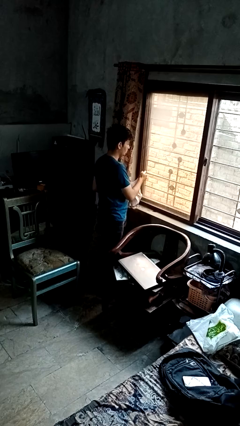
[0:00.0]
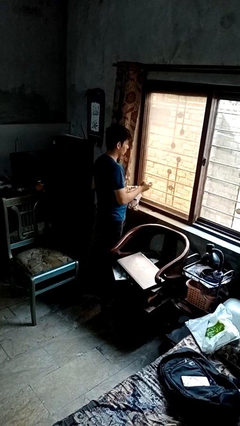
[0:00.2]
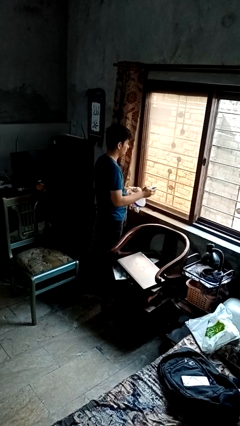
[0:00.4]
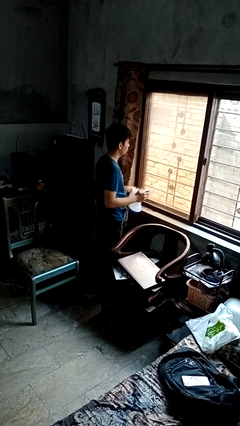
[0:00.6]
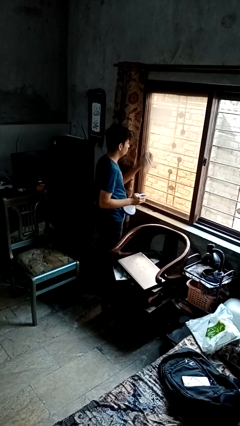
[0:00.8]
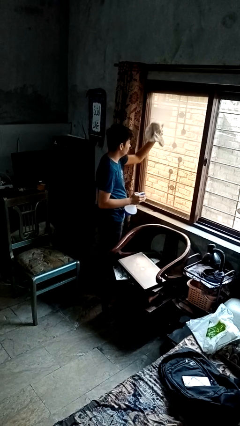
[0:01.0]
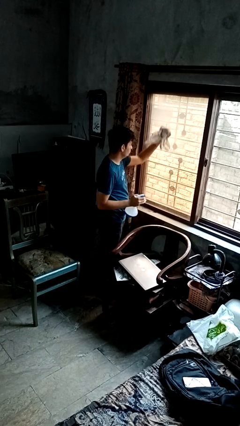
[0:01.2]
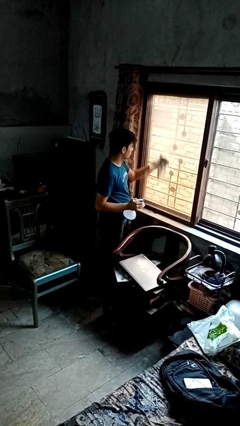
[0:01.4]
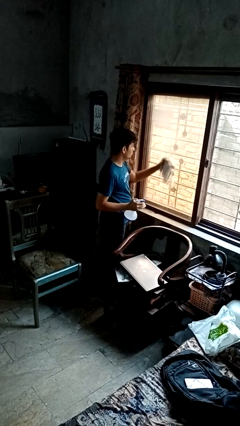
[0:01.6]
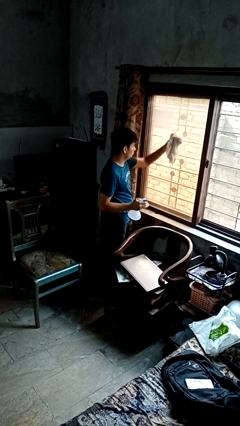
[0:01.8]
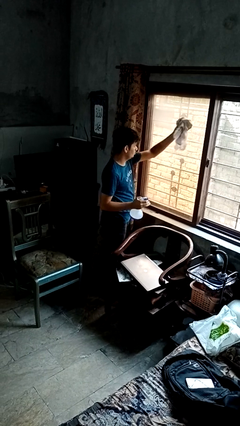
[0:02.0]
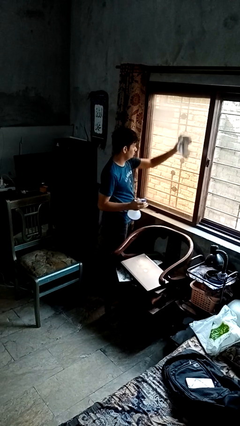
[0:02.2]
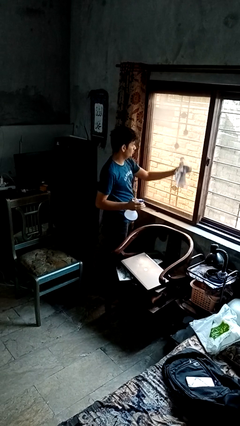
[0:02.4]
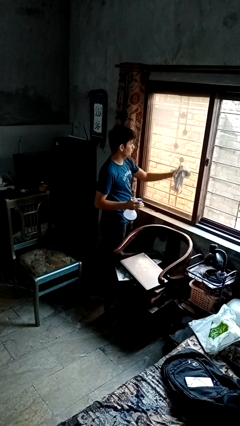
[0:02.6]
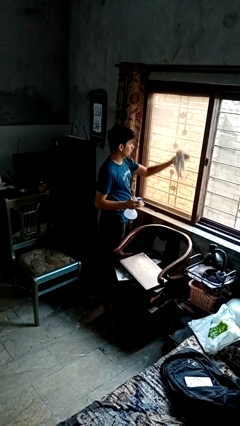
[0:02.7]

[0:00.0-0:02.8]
person washes window

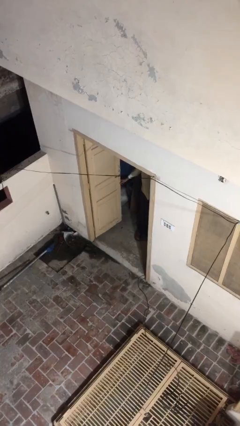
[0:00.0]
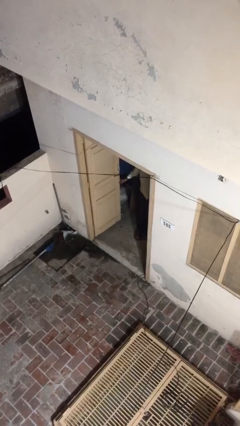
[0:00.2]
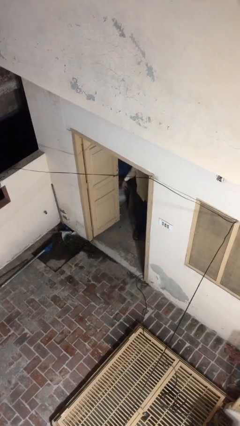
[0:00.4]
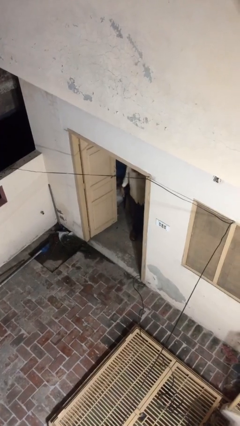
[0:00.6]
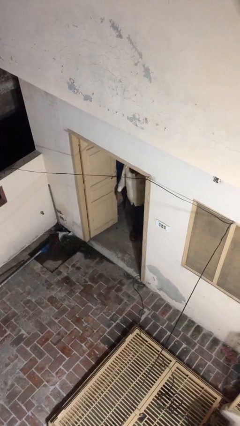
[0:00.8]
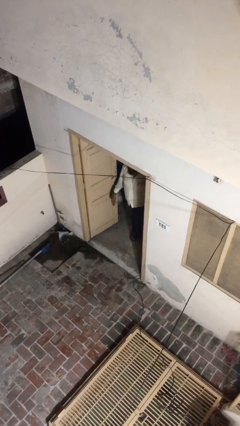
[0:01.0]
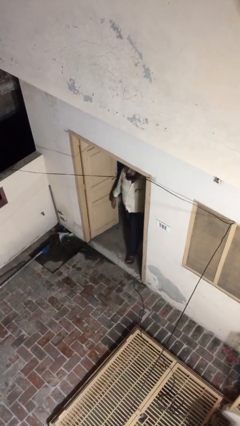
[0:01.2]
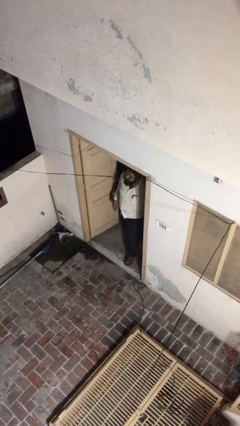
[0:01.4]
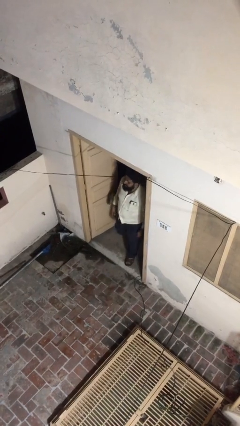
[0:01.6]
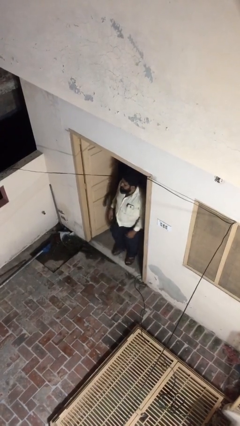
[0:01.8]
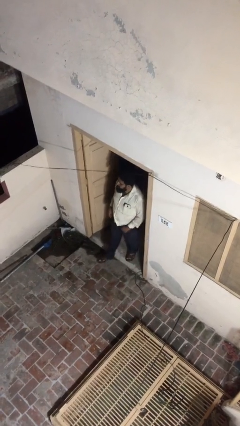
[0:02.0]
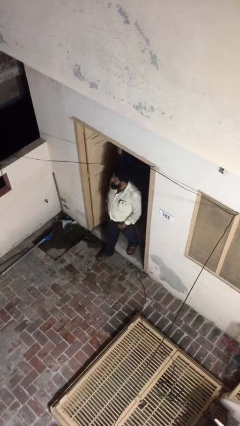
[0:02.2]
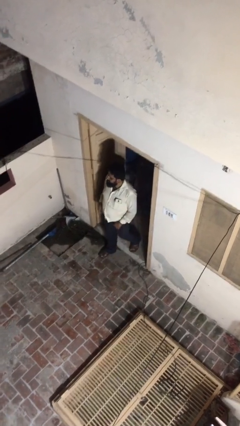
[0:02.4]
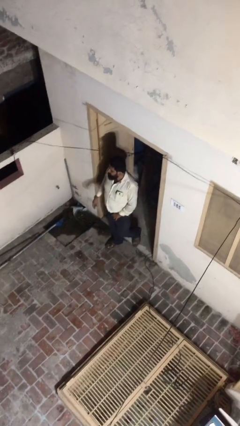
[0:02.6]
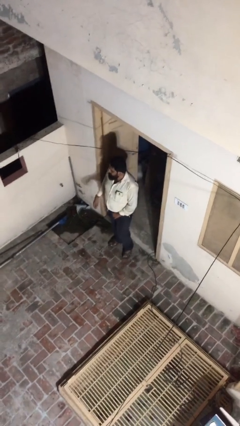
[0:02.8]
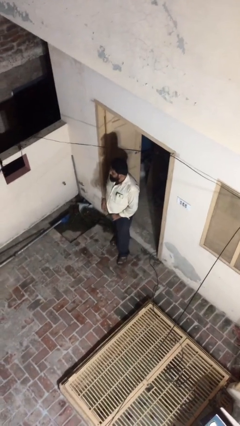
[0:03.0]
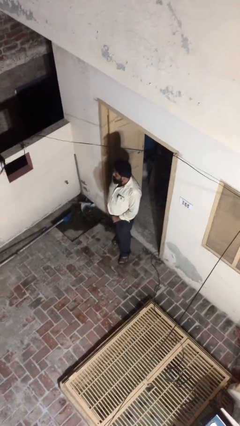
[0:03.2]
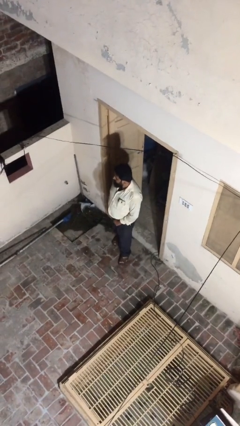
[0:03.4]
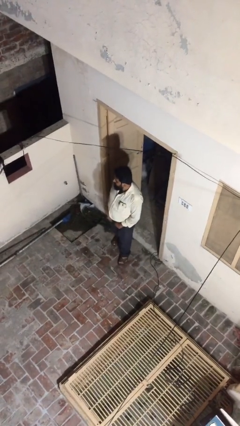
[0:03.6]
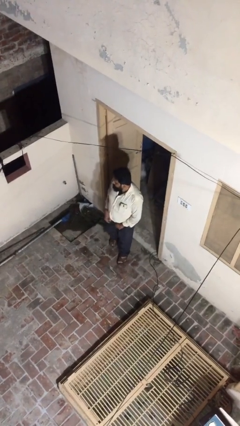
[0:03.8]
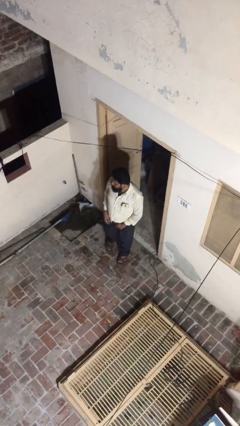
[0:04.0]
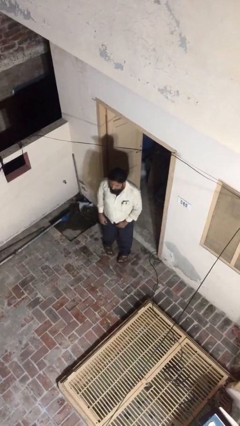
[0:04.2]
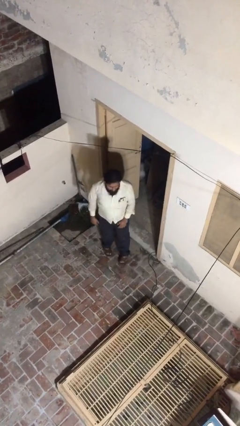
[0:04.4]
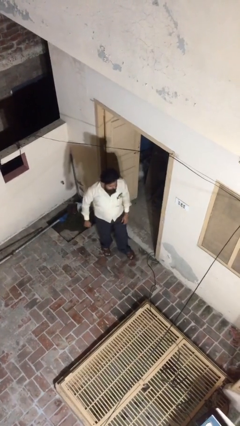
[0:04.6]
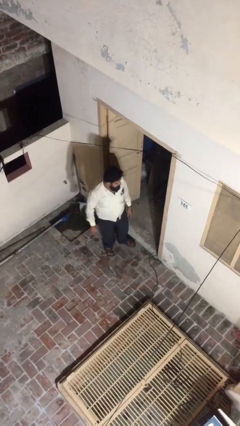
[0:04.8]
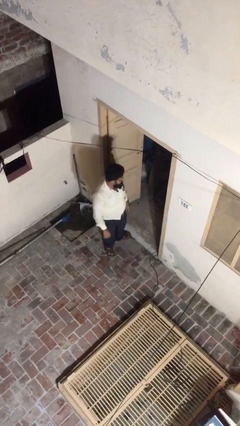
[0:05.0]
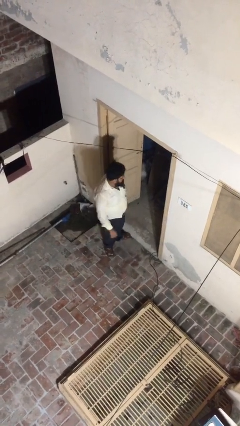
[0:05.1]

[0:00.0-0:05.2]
person enters scene through structure

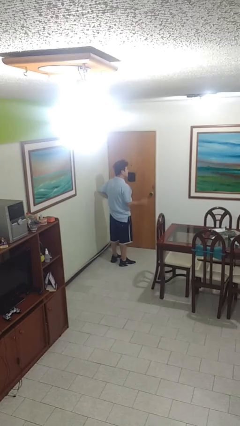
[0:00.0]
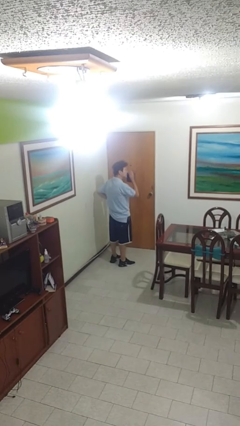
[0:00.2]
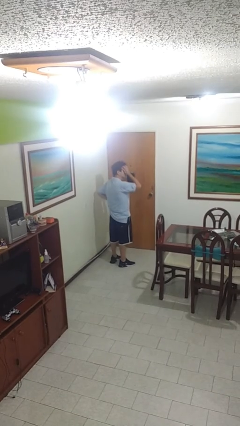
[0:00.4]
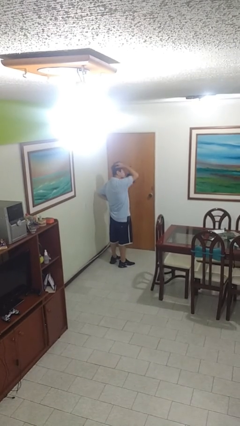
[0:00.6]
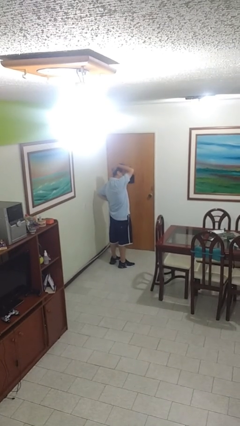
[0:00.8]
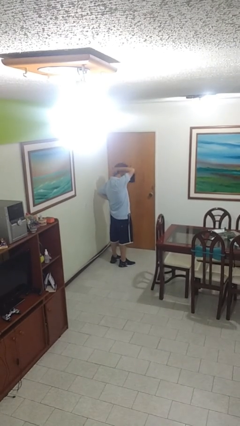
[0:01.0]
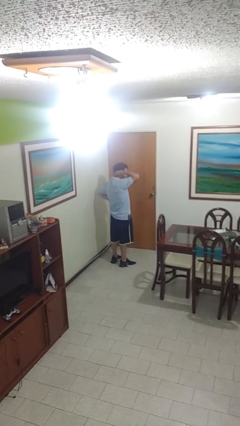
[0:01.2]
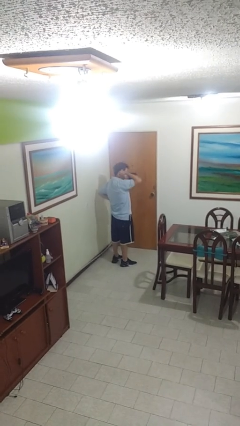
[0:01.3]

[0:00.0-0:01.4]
person strokes hair

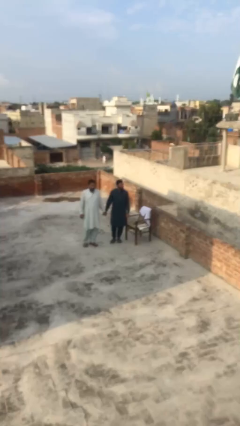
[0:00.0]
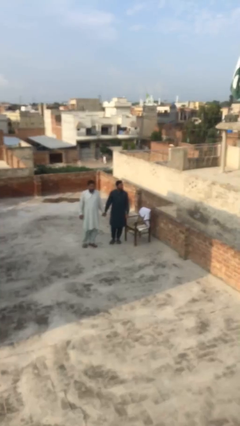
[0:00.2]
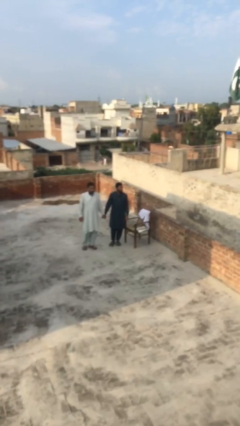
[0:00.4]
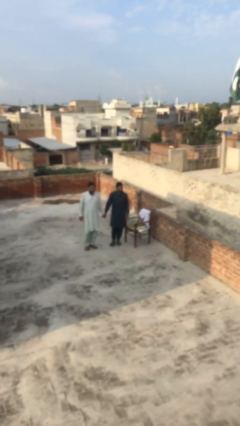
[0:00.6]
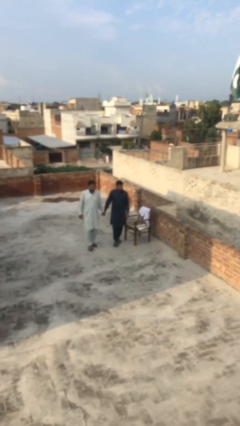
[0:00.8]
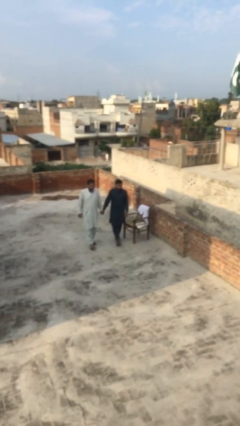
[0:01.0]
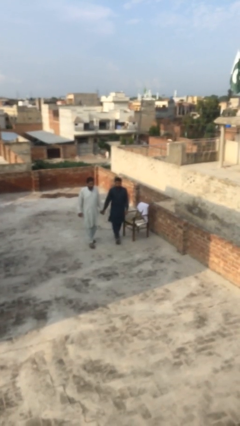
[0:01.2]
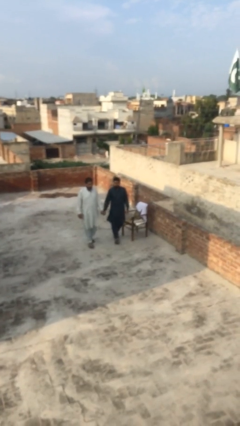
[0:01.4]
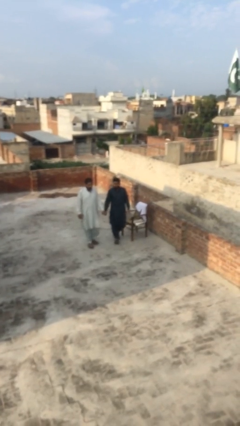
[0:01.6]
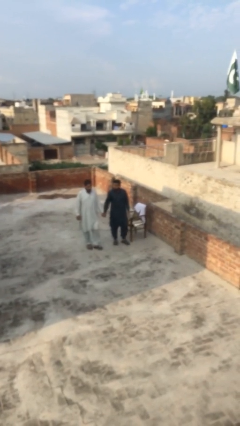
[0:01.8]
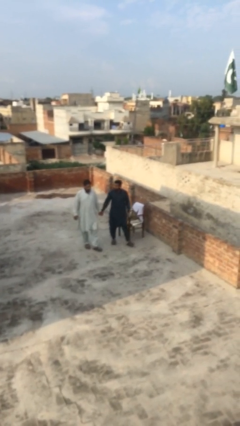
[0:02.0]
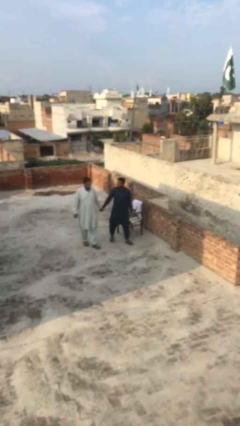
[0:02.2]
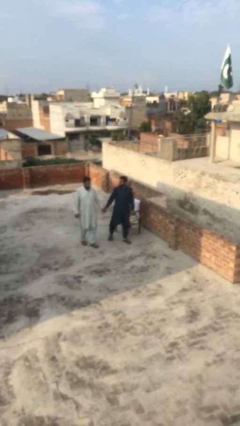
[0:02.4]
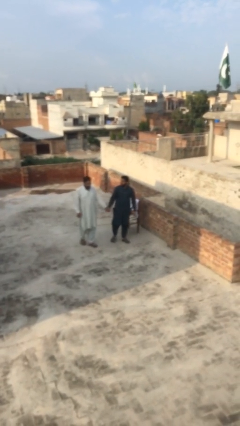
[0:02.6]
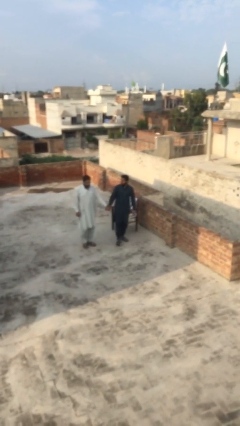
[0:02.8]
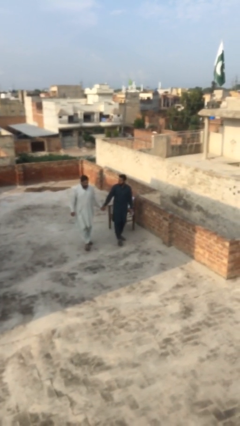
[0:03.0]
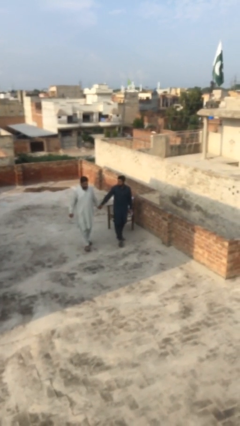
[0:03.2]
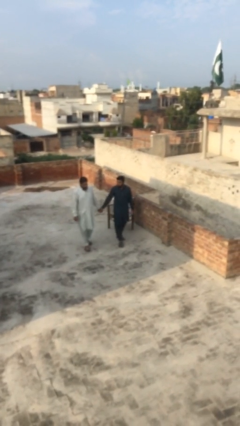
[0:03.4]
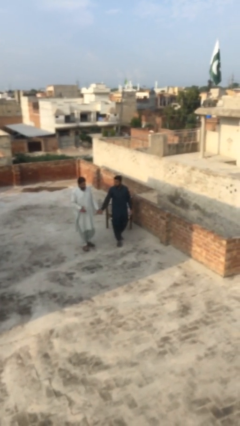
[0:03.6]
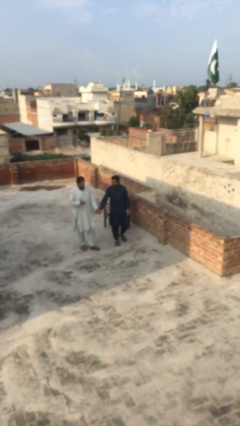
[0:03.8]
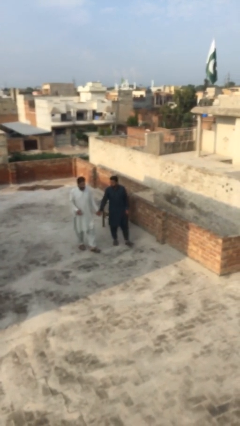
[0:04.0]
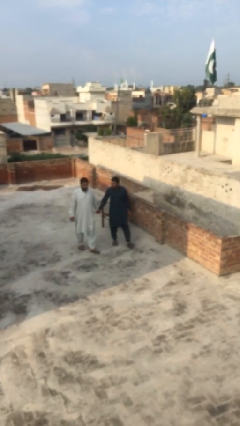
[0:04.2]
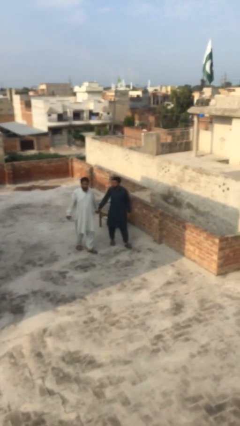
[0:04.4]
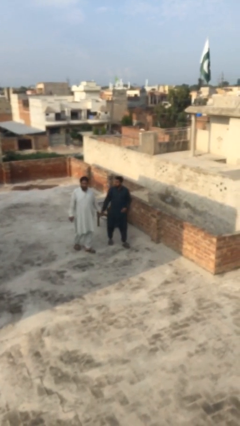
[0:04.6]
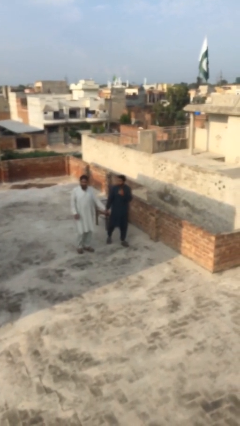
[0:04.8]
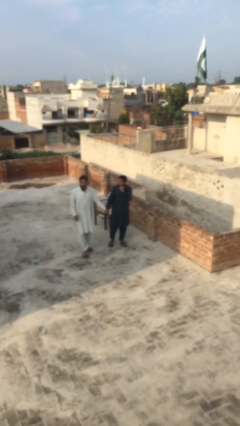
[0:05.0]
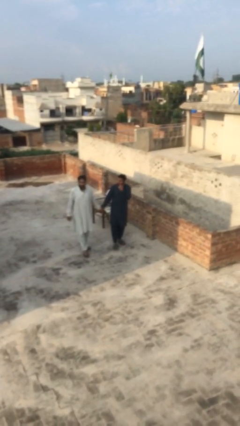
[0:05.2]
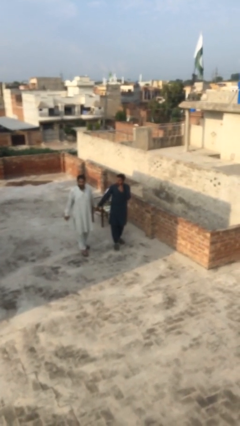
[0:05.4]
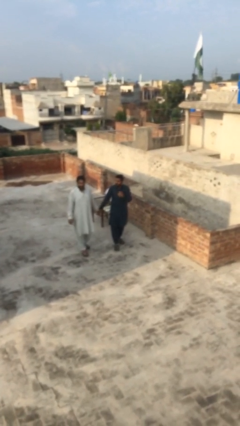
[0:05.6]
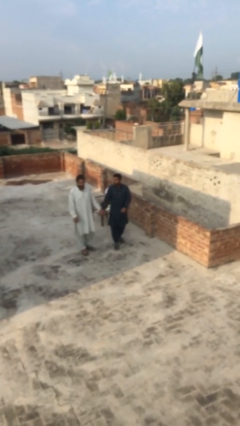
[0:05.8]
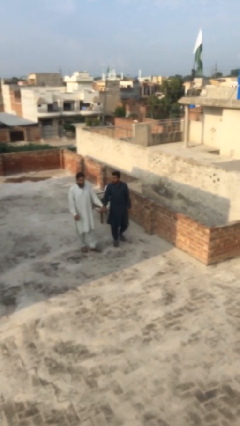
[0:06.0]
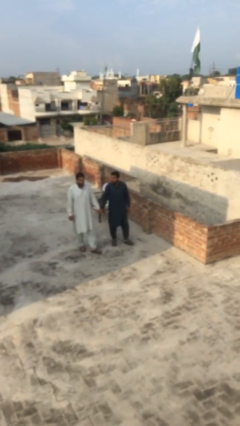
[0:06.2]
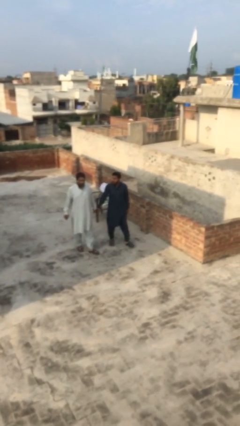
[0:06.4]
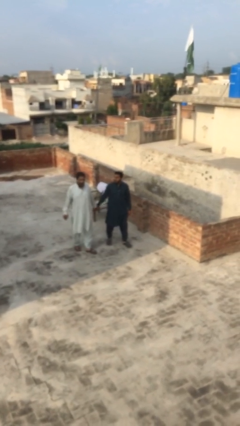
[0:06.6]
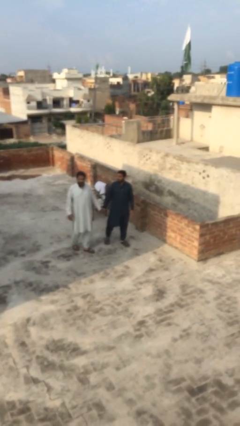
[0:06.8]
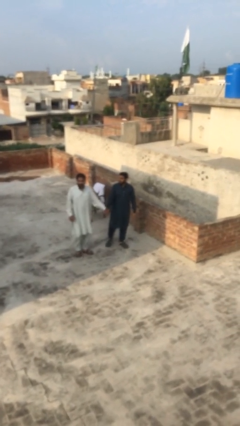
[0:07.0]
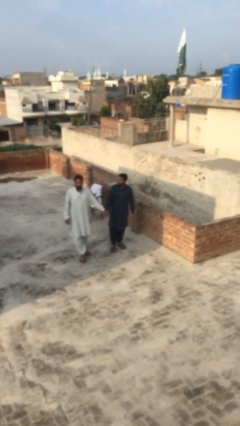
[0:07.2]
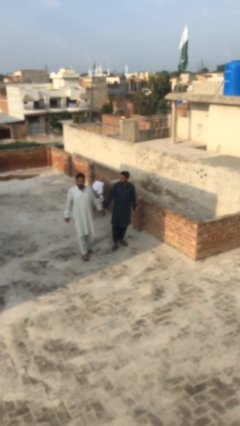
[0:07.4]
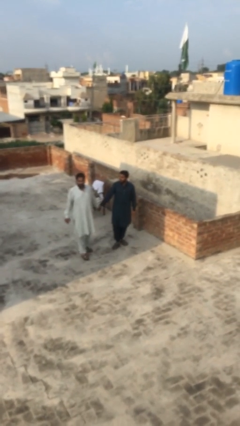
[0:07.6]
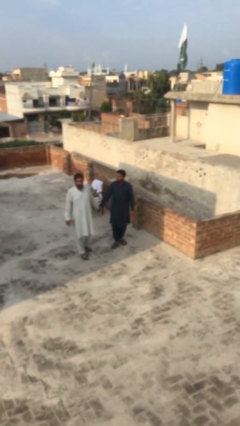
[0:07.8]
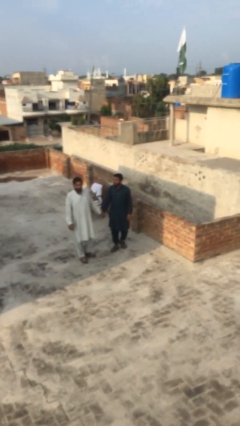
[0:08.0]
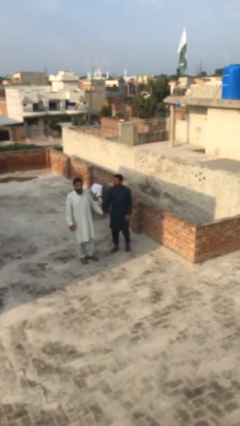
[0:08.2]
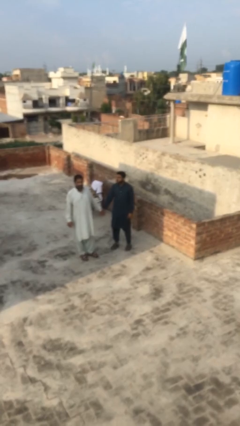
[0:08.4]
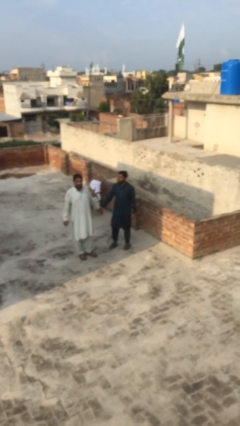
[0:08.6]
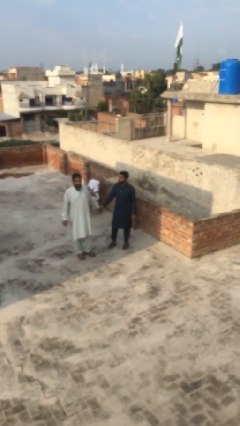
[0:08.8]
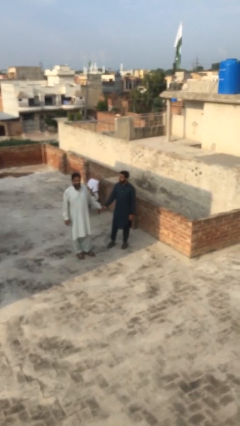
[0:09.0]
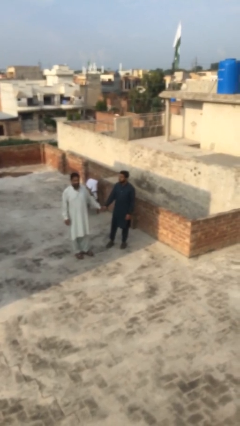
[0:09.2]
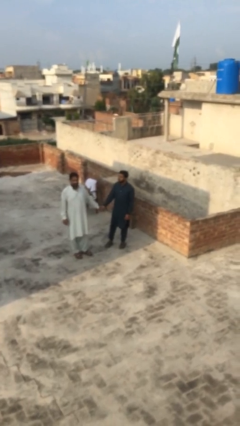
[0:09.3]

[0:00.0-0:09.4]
person holds hand
